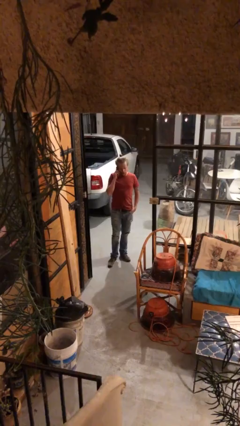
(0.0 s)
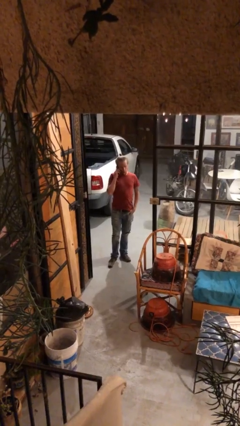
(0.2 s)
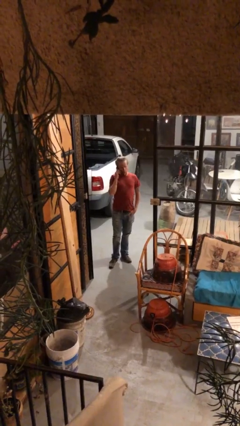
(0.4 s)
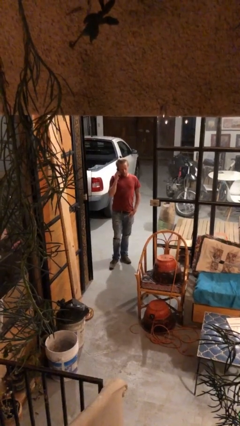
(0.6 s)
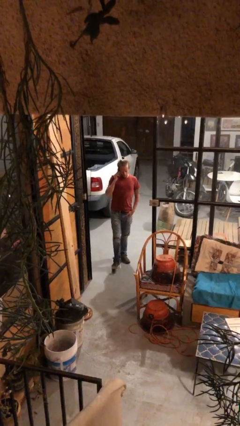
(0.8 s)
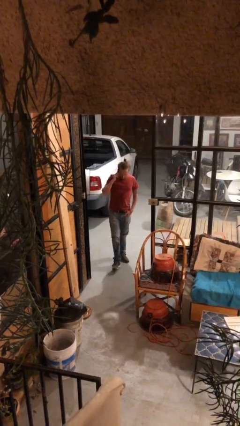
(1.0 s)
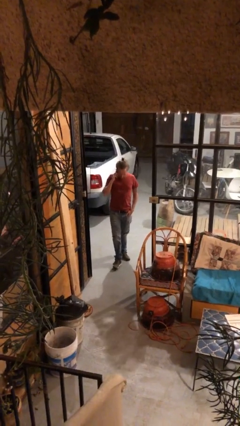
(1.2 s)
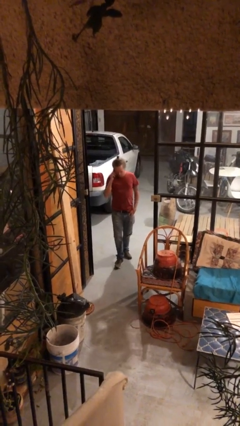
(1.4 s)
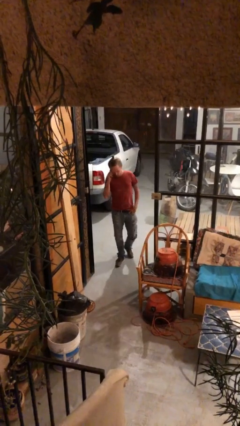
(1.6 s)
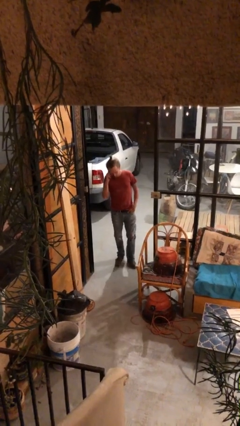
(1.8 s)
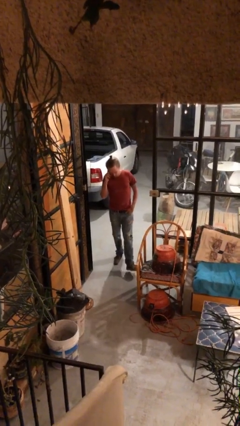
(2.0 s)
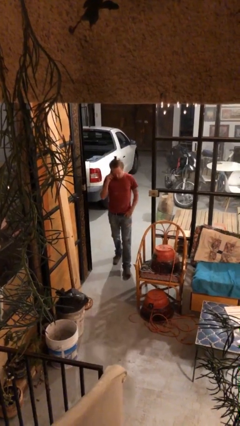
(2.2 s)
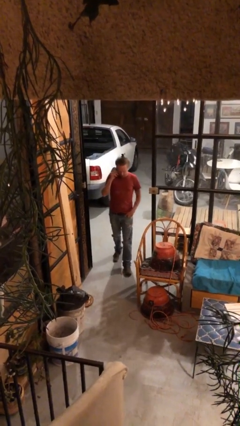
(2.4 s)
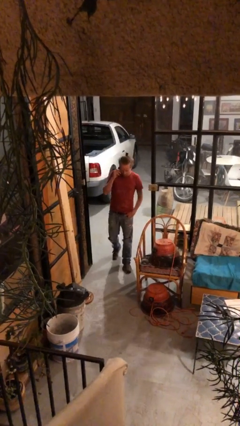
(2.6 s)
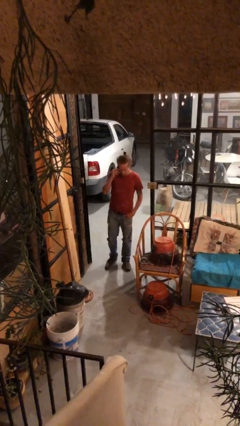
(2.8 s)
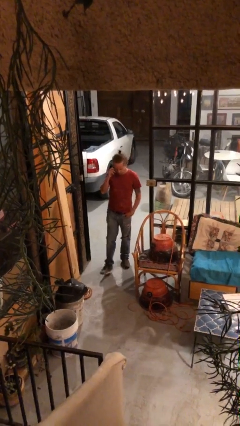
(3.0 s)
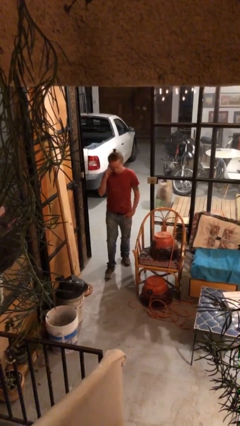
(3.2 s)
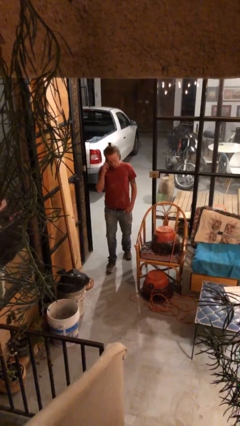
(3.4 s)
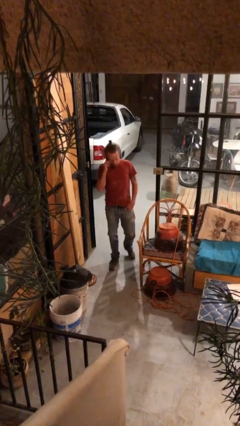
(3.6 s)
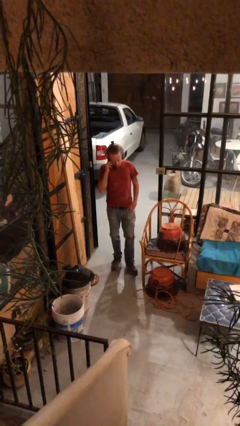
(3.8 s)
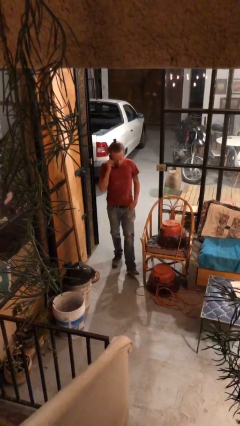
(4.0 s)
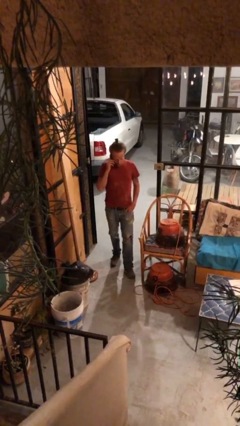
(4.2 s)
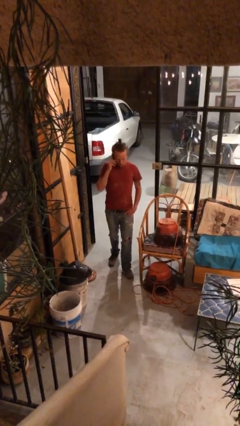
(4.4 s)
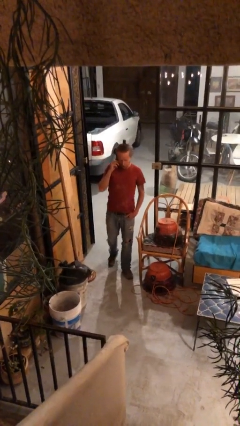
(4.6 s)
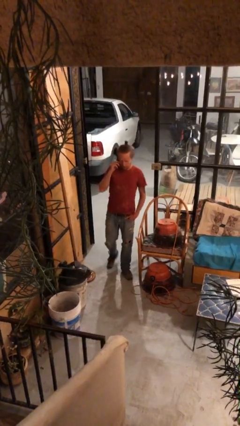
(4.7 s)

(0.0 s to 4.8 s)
person enters scene through structure

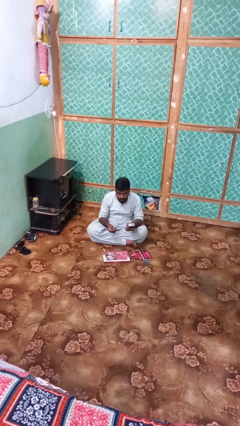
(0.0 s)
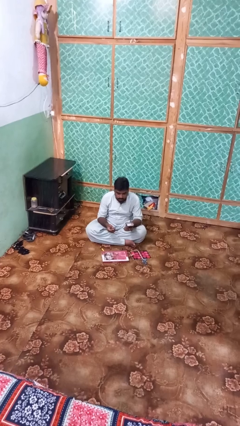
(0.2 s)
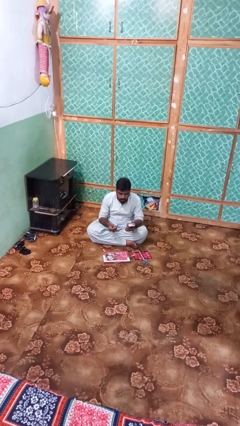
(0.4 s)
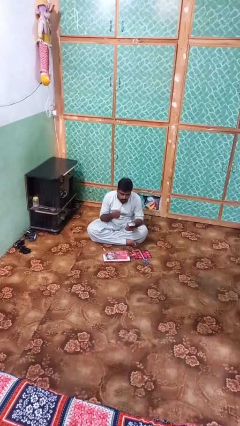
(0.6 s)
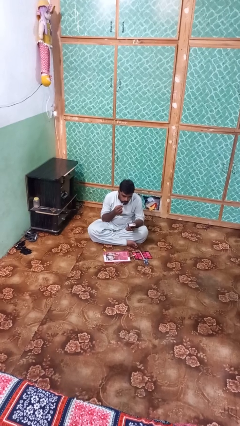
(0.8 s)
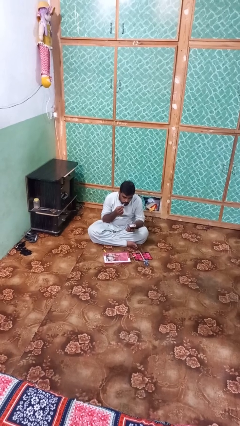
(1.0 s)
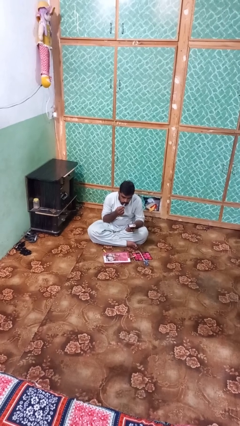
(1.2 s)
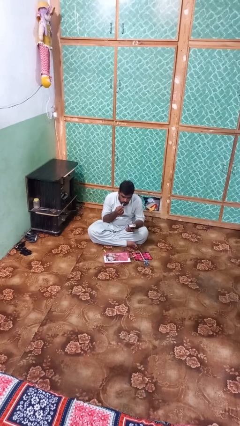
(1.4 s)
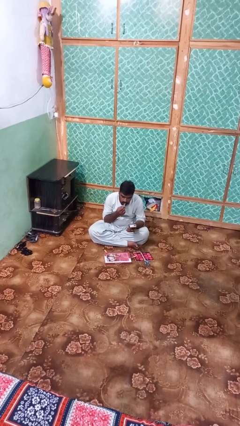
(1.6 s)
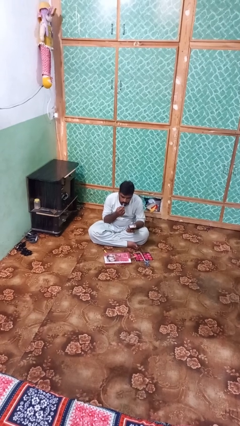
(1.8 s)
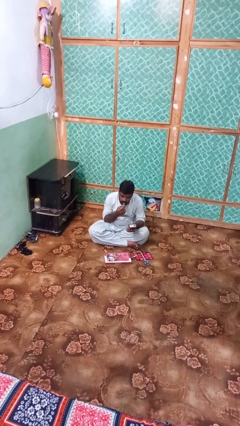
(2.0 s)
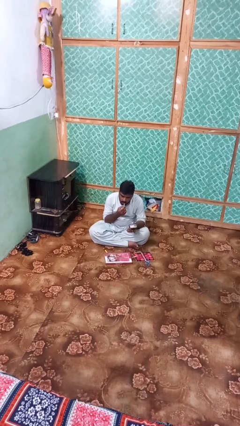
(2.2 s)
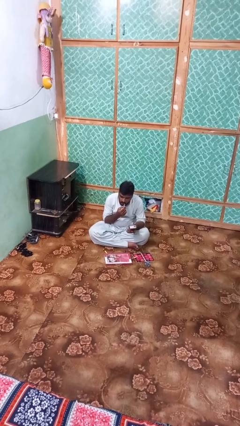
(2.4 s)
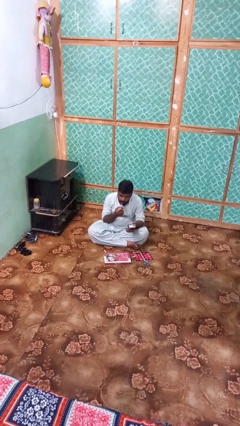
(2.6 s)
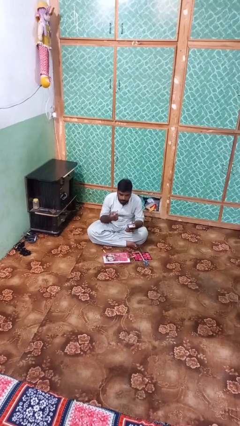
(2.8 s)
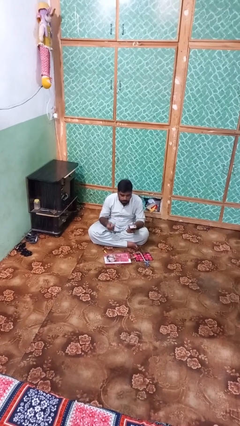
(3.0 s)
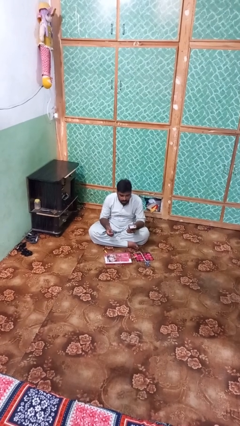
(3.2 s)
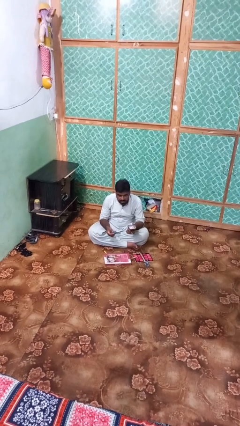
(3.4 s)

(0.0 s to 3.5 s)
person applies lip makeup

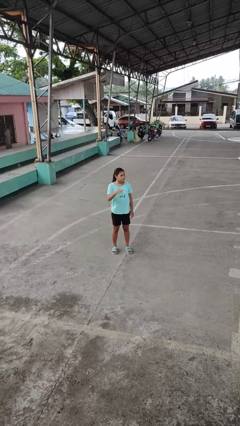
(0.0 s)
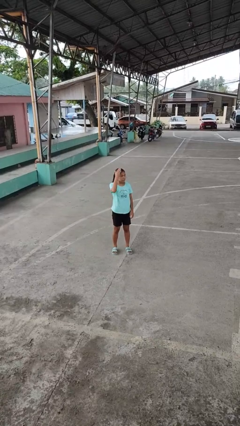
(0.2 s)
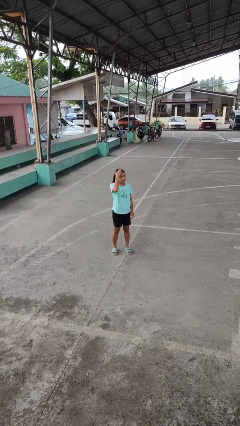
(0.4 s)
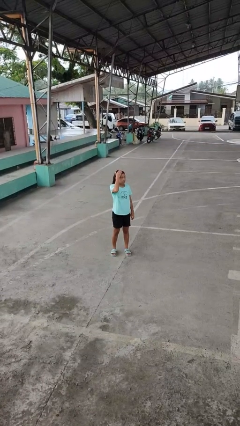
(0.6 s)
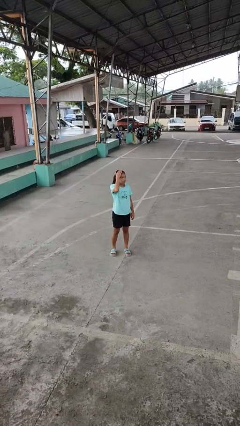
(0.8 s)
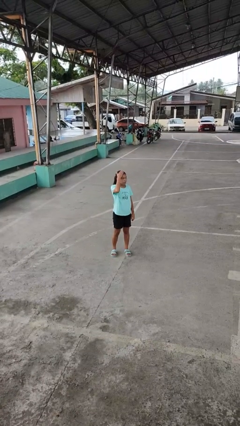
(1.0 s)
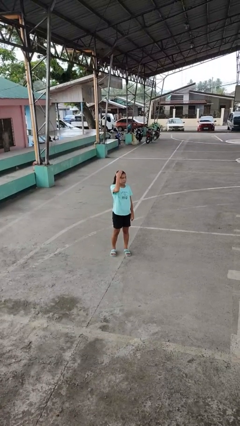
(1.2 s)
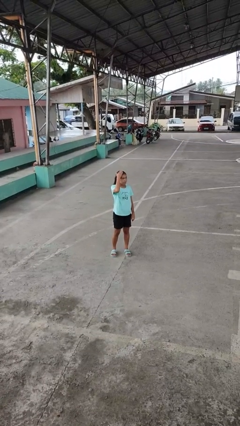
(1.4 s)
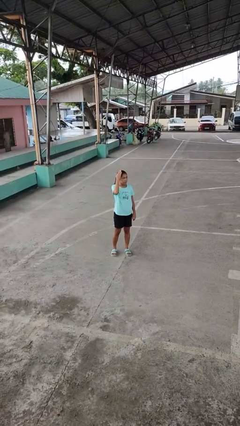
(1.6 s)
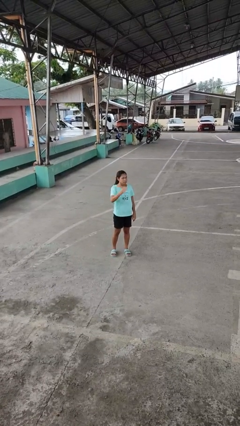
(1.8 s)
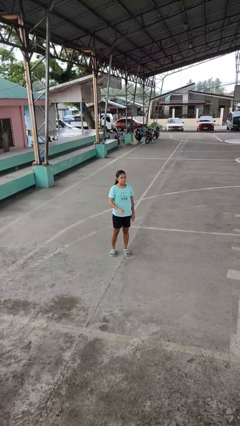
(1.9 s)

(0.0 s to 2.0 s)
person pats head

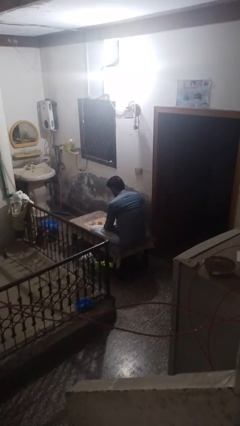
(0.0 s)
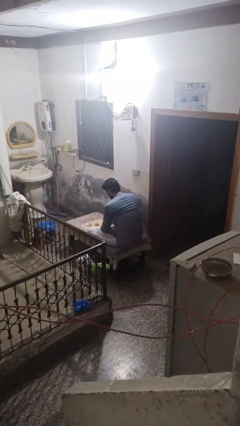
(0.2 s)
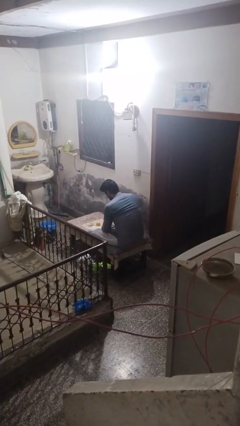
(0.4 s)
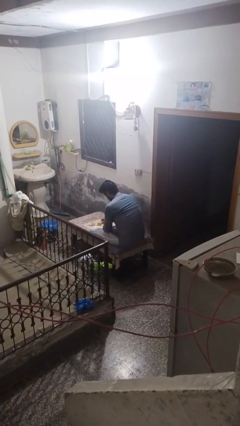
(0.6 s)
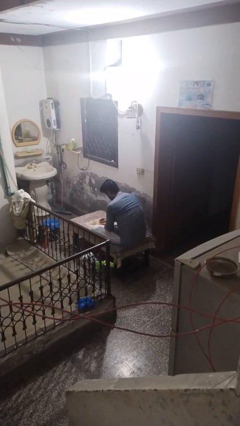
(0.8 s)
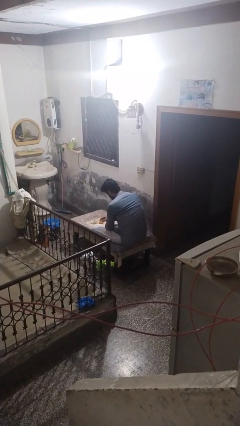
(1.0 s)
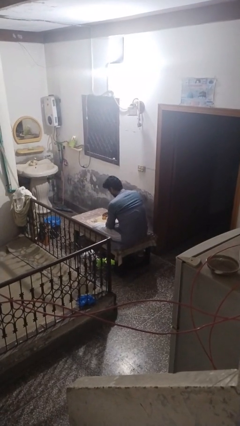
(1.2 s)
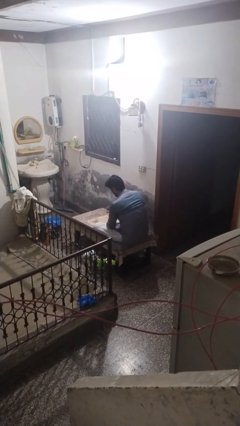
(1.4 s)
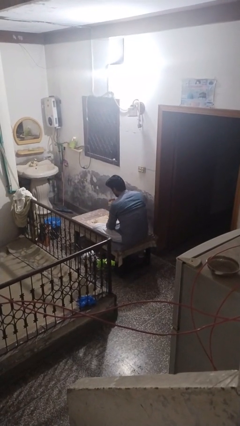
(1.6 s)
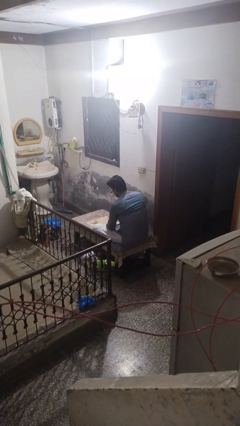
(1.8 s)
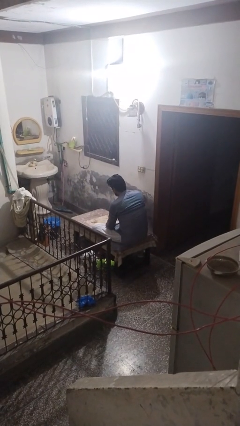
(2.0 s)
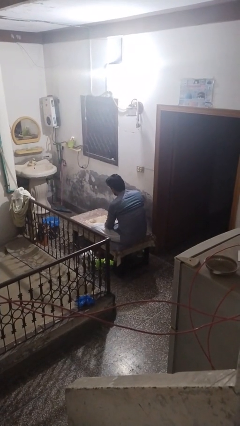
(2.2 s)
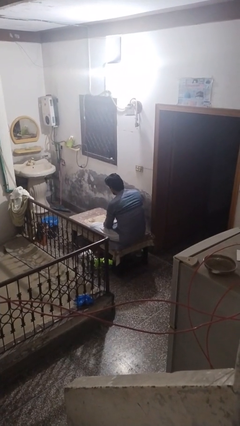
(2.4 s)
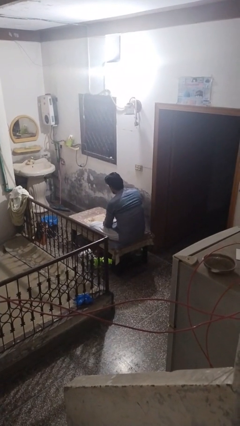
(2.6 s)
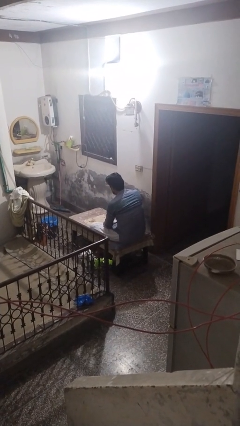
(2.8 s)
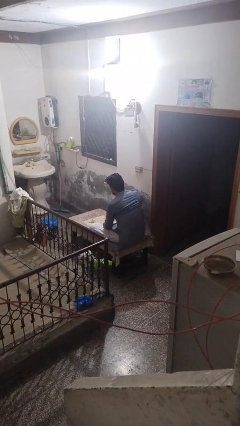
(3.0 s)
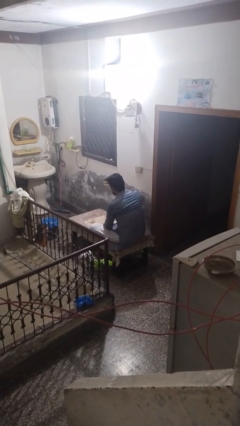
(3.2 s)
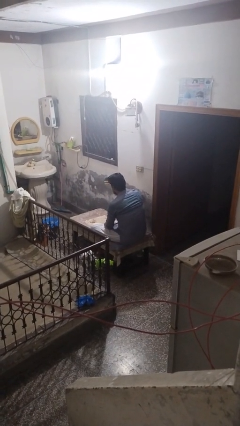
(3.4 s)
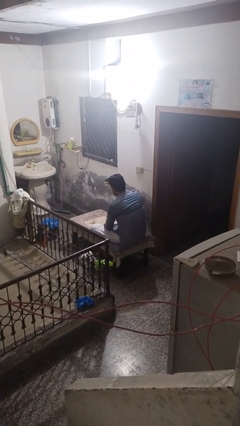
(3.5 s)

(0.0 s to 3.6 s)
person picks up object from table

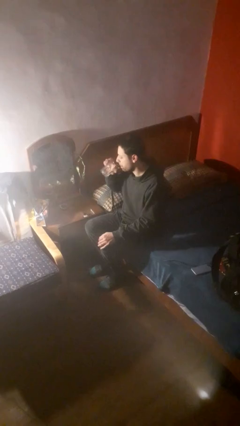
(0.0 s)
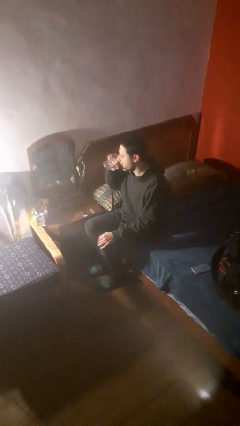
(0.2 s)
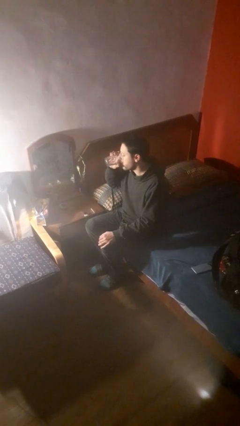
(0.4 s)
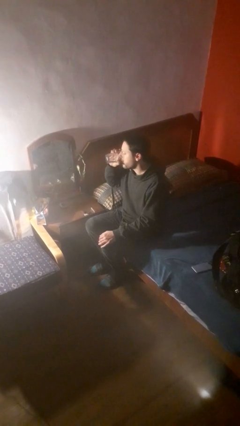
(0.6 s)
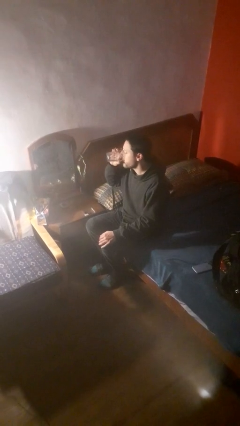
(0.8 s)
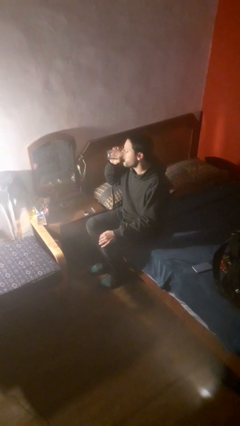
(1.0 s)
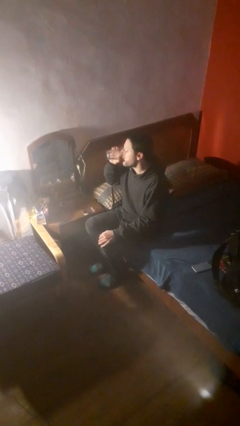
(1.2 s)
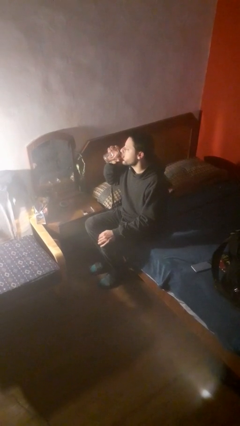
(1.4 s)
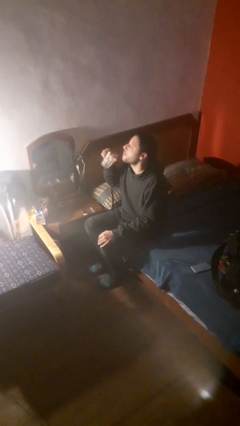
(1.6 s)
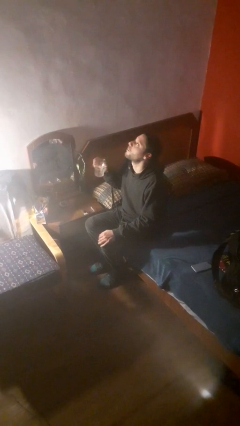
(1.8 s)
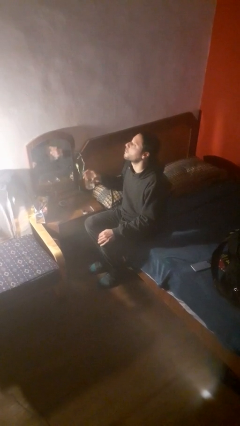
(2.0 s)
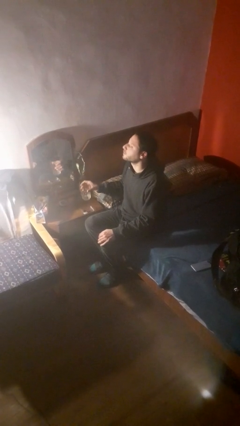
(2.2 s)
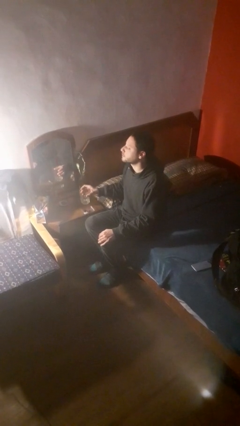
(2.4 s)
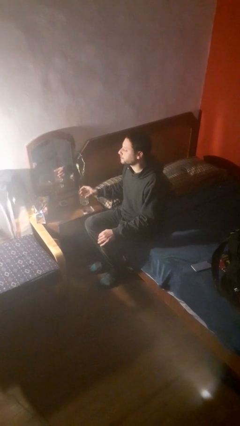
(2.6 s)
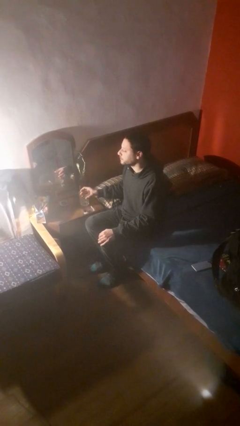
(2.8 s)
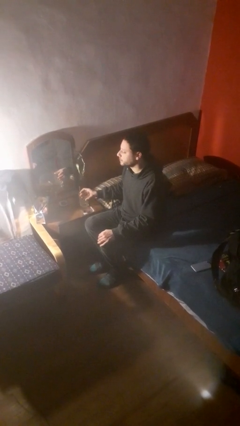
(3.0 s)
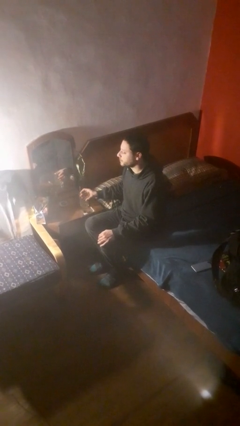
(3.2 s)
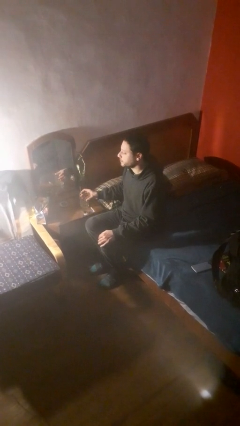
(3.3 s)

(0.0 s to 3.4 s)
person drinks from cup
